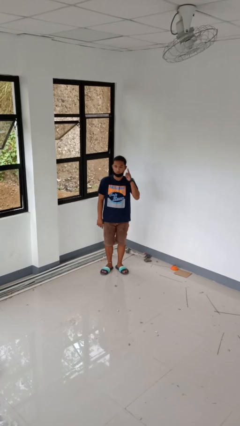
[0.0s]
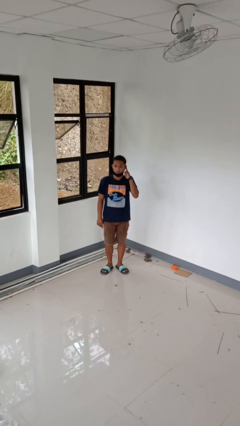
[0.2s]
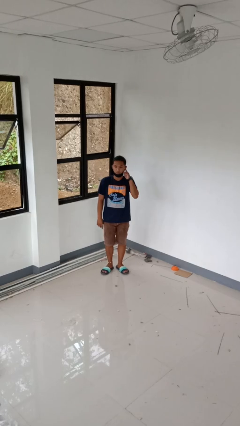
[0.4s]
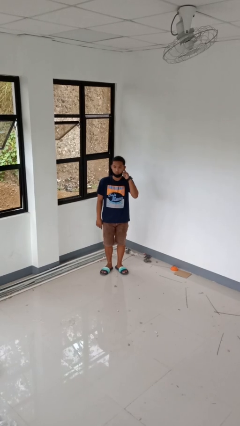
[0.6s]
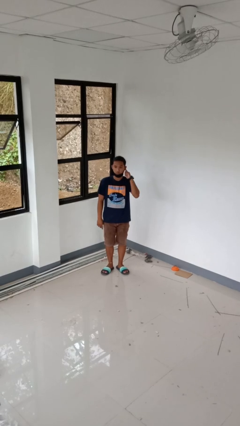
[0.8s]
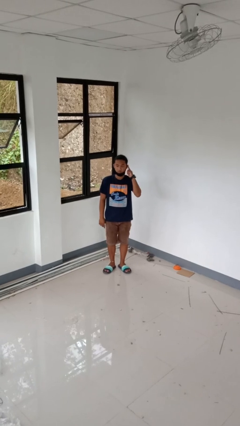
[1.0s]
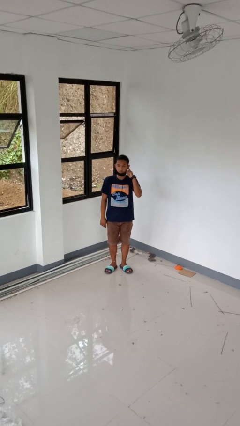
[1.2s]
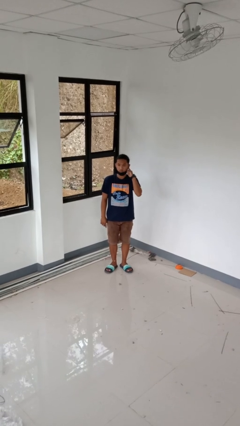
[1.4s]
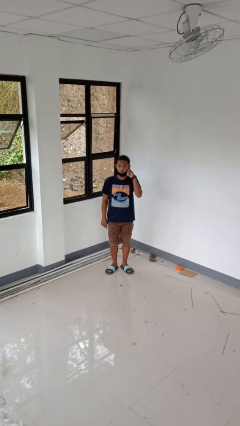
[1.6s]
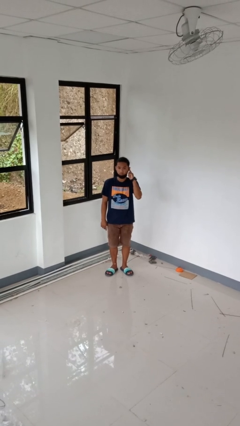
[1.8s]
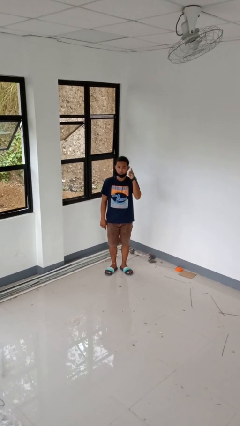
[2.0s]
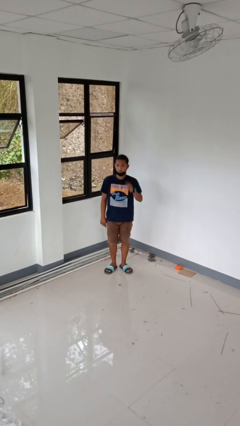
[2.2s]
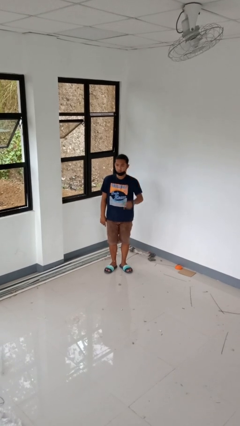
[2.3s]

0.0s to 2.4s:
person gestures listen closely

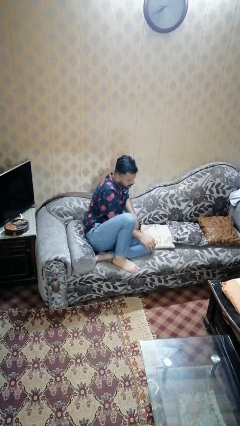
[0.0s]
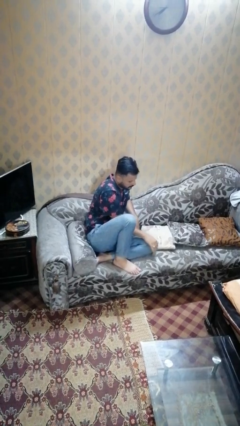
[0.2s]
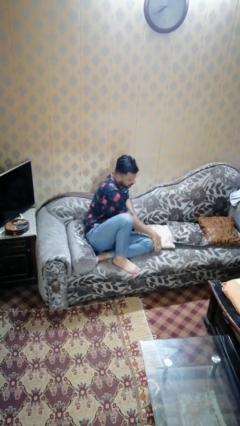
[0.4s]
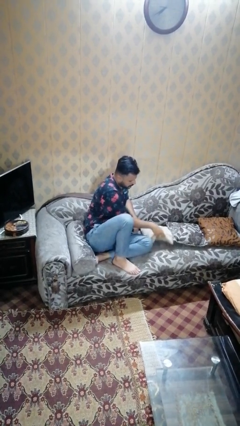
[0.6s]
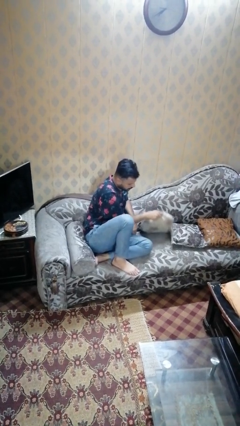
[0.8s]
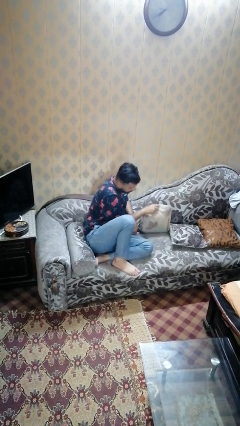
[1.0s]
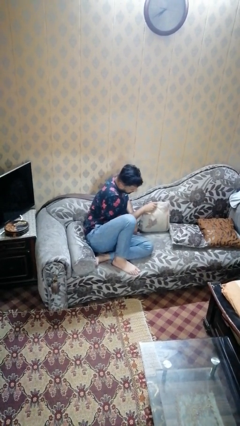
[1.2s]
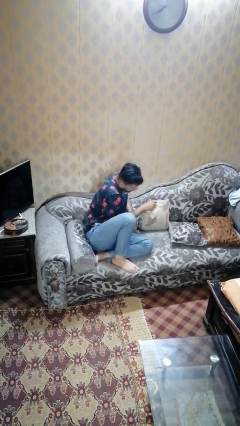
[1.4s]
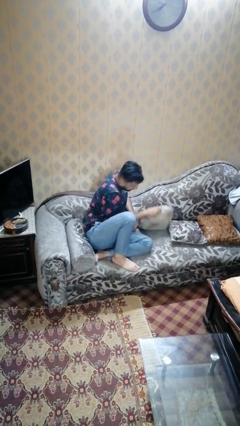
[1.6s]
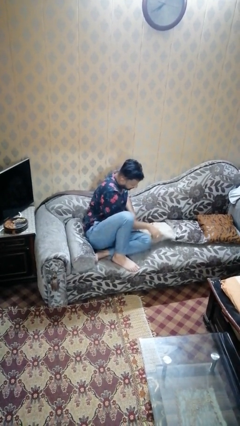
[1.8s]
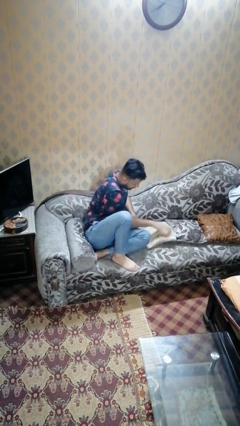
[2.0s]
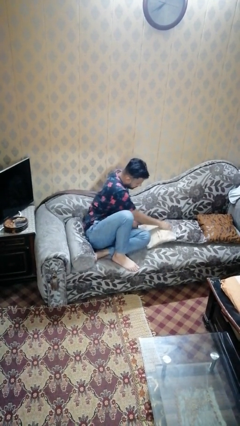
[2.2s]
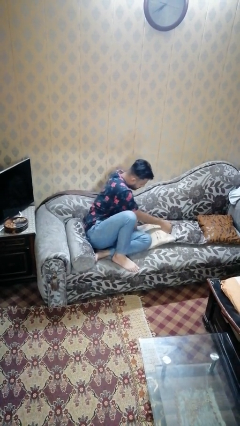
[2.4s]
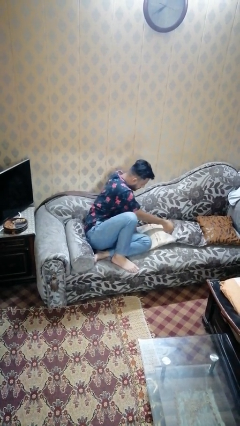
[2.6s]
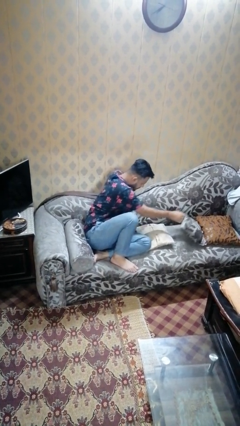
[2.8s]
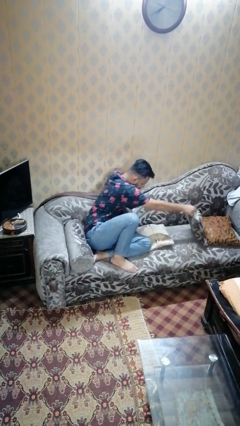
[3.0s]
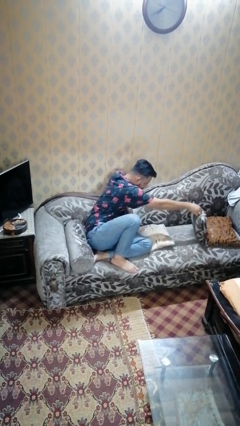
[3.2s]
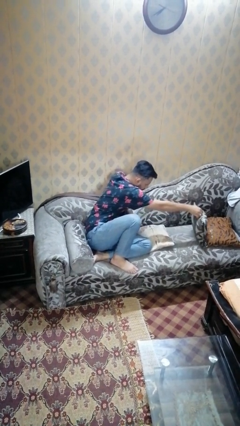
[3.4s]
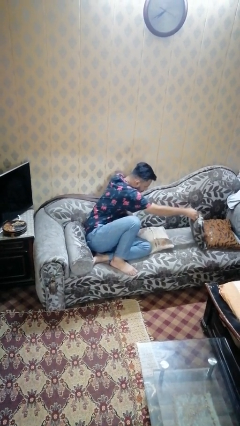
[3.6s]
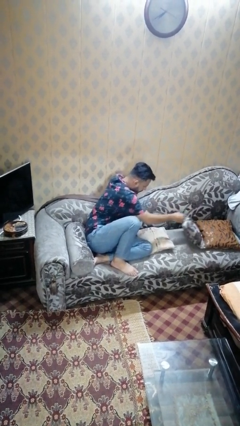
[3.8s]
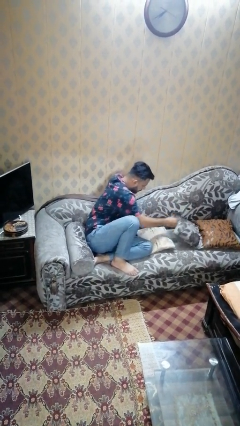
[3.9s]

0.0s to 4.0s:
person searches in couch

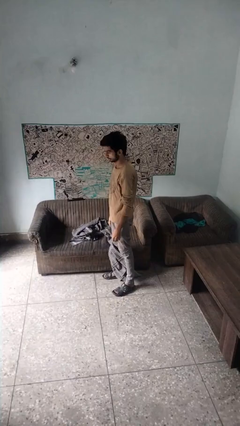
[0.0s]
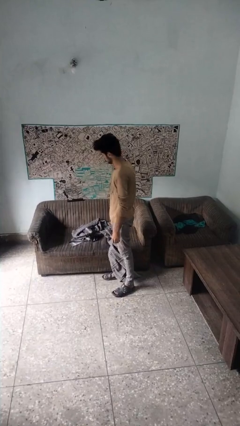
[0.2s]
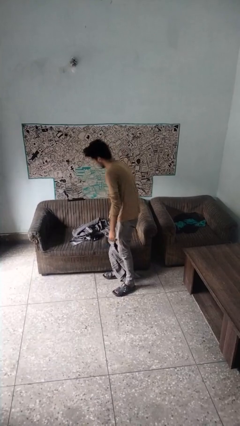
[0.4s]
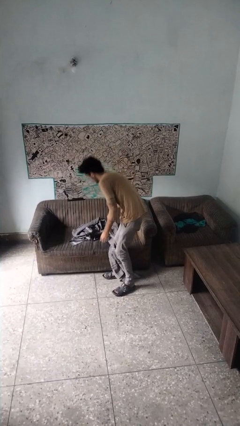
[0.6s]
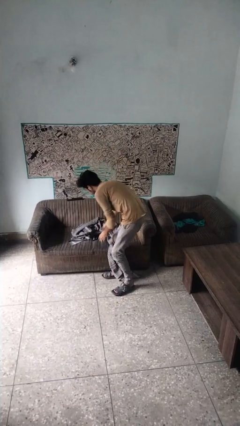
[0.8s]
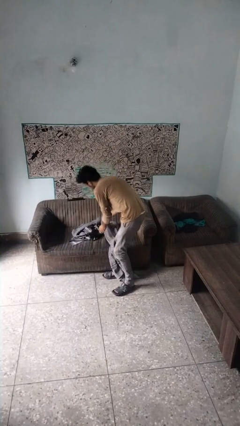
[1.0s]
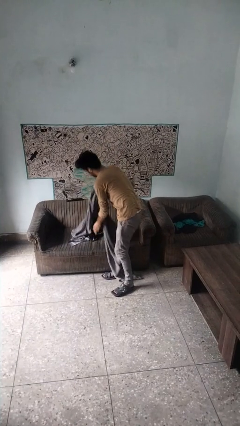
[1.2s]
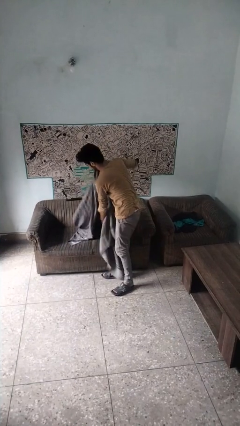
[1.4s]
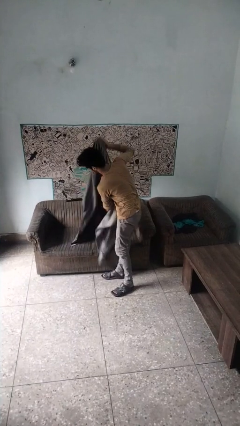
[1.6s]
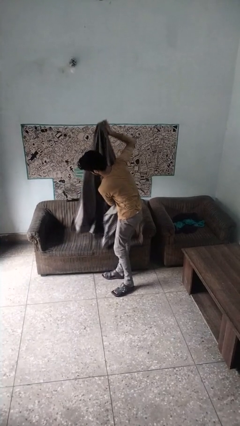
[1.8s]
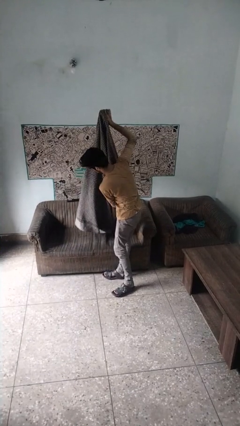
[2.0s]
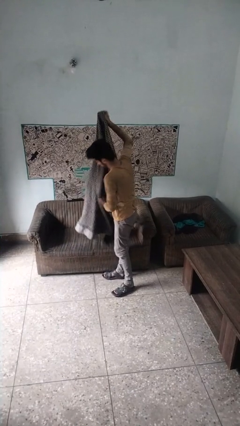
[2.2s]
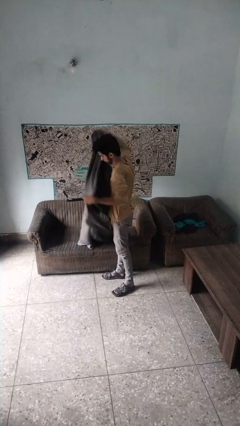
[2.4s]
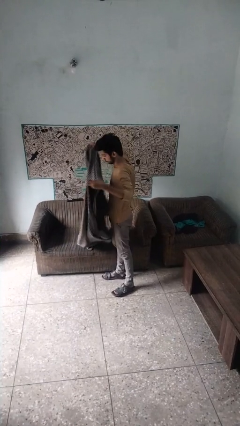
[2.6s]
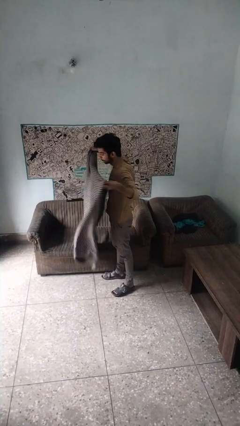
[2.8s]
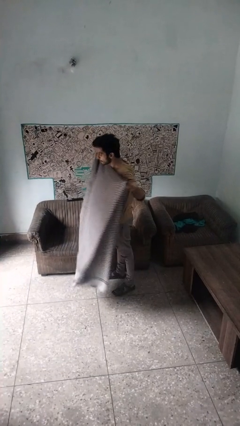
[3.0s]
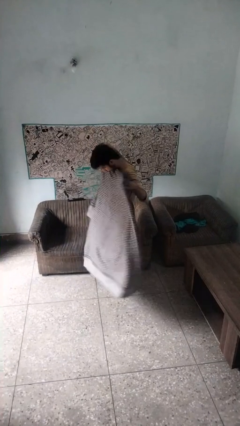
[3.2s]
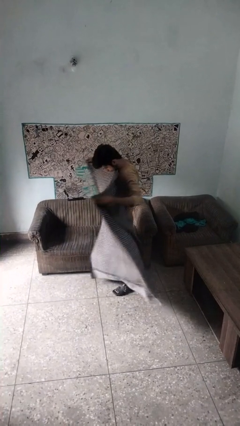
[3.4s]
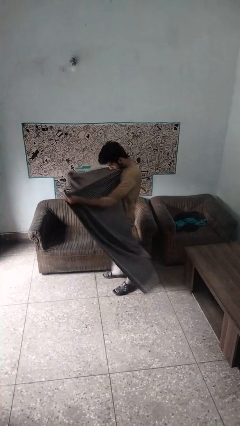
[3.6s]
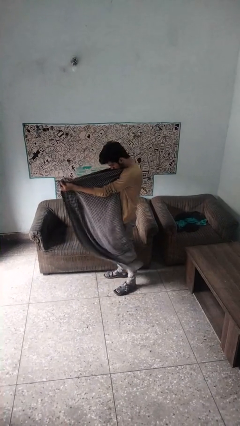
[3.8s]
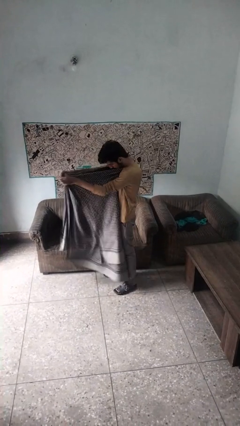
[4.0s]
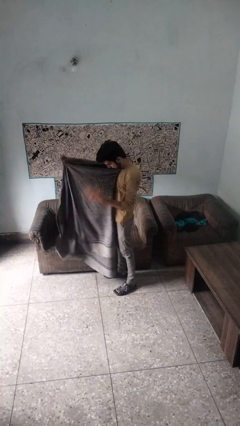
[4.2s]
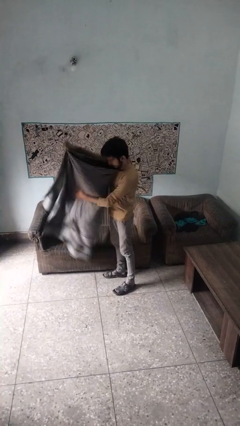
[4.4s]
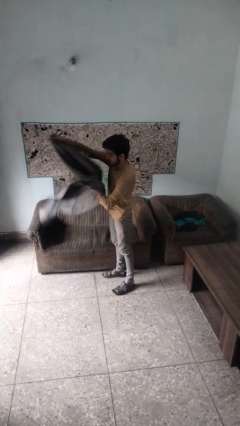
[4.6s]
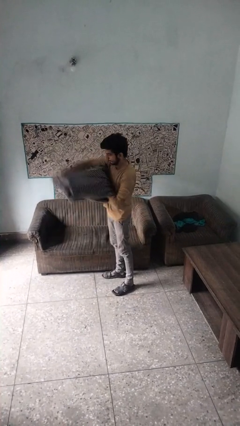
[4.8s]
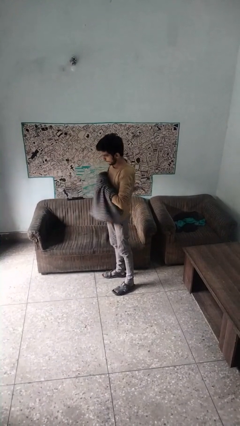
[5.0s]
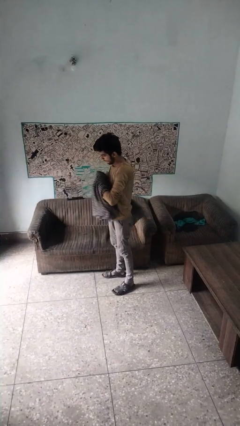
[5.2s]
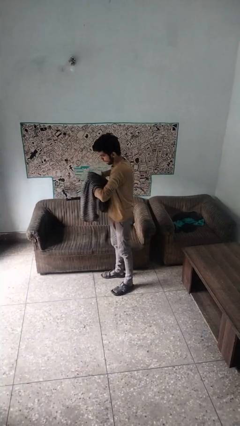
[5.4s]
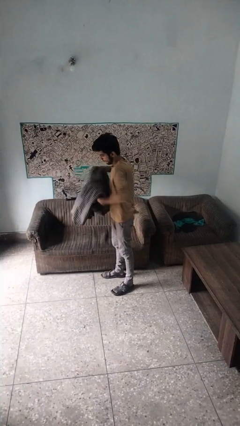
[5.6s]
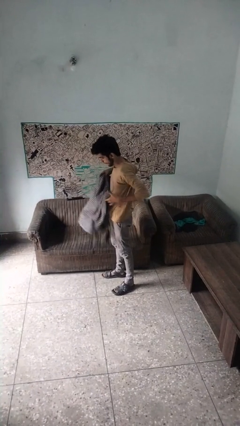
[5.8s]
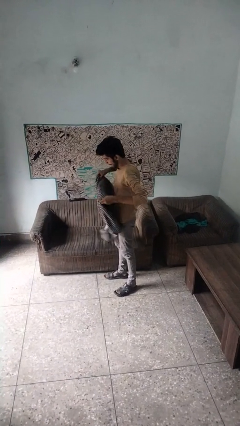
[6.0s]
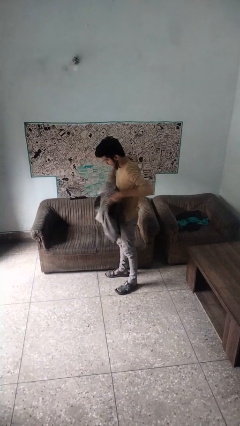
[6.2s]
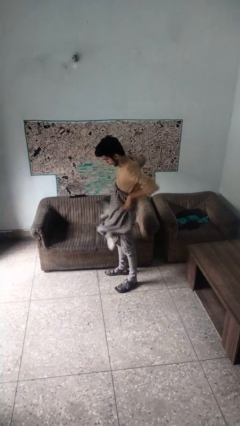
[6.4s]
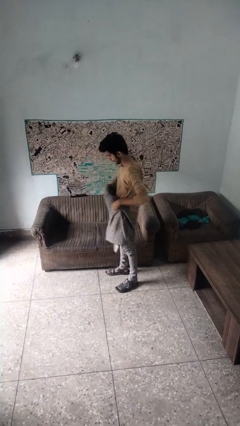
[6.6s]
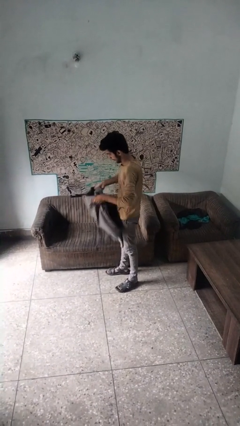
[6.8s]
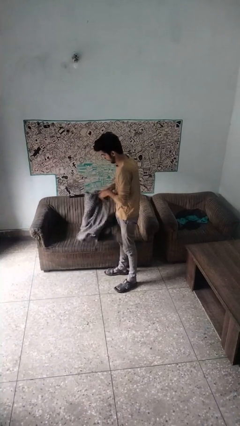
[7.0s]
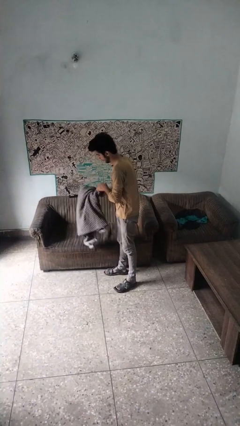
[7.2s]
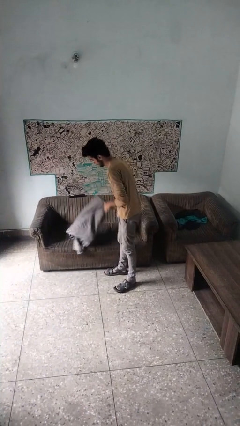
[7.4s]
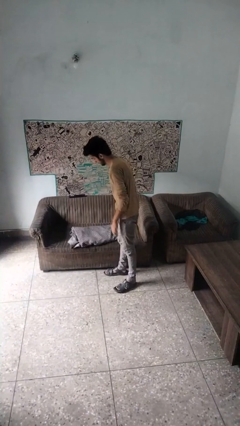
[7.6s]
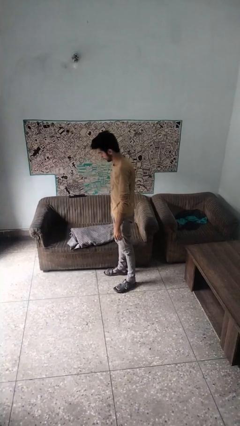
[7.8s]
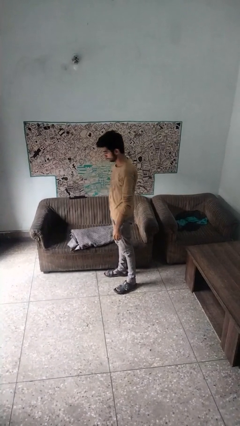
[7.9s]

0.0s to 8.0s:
person folds blanket

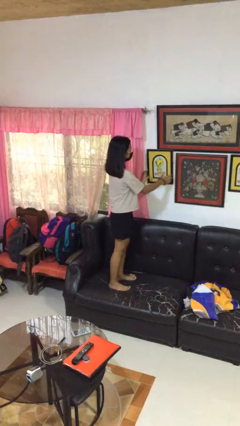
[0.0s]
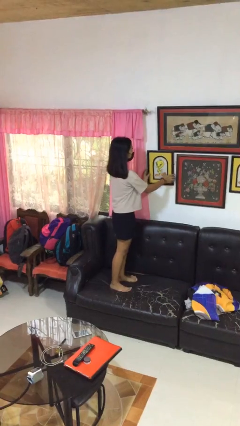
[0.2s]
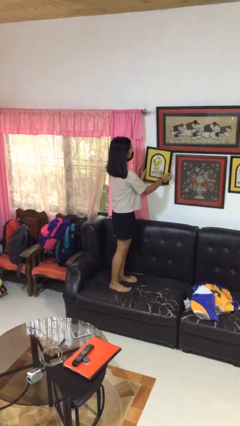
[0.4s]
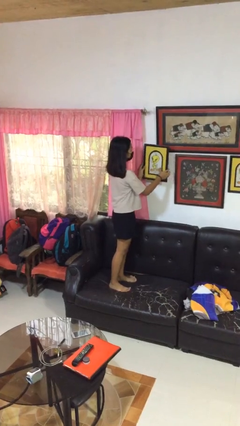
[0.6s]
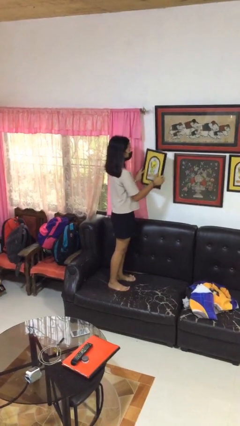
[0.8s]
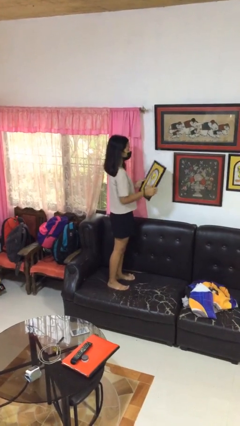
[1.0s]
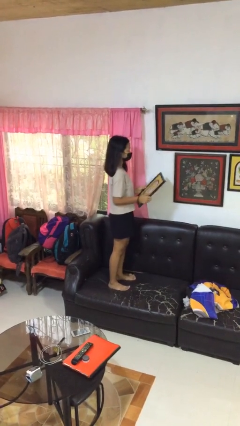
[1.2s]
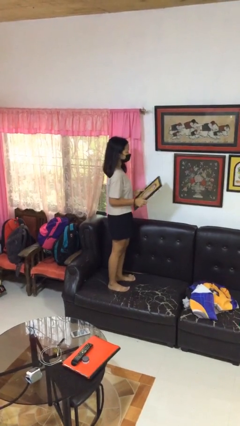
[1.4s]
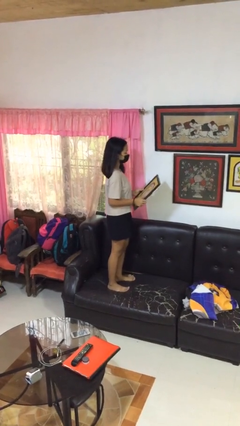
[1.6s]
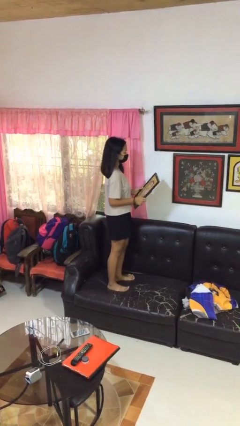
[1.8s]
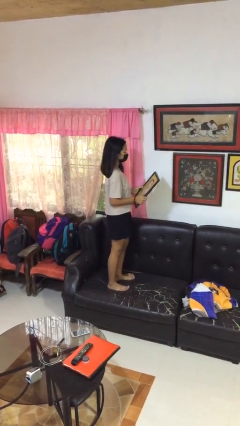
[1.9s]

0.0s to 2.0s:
person takes down picture frame

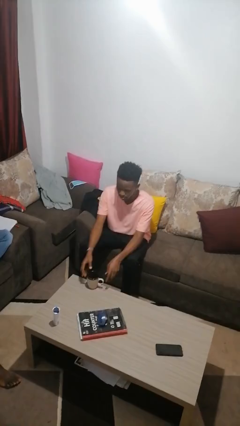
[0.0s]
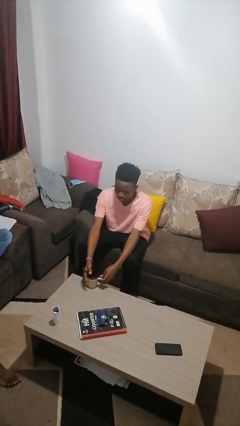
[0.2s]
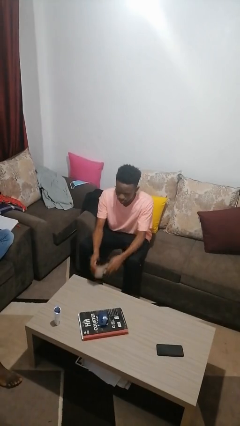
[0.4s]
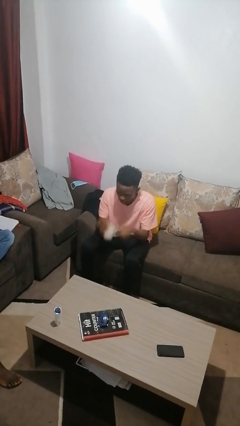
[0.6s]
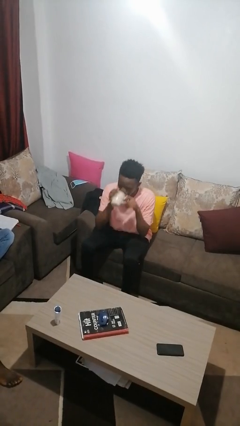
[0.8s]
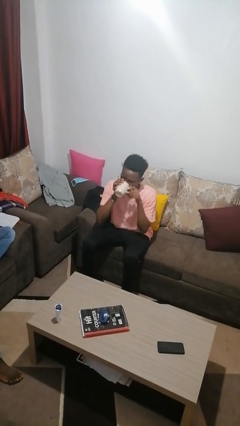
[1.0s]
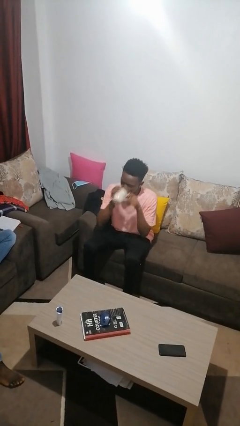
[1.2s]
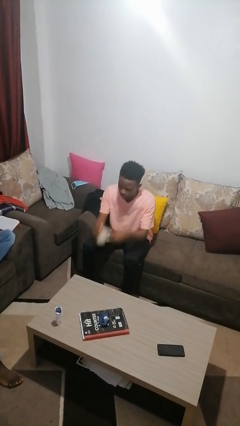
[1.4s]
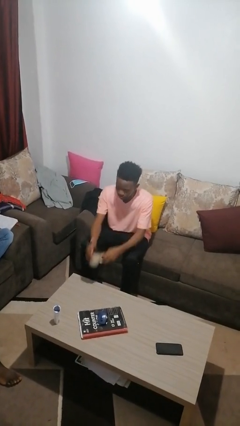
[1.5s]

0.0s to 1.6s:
person drinks from mug
